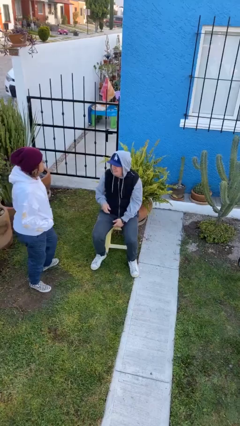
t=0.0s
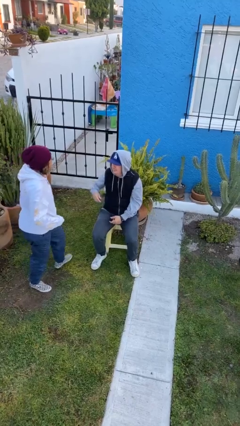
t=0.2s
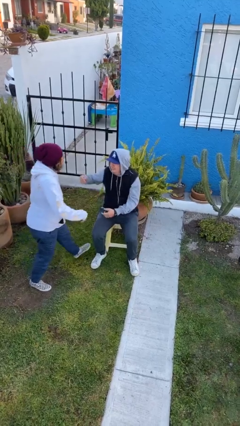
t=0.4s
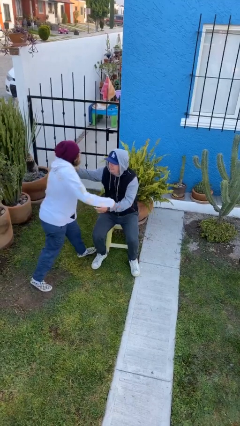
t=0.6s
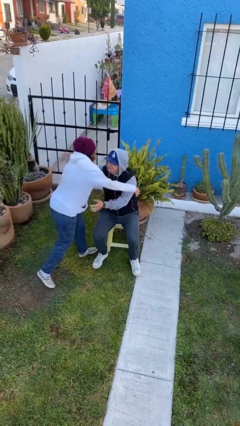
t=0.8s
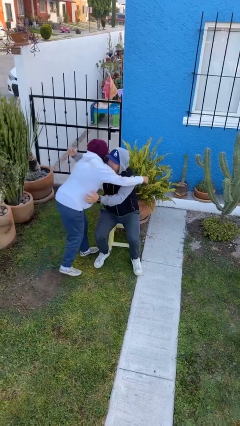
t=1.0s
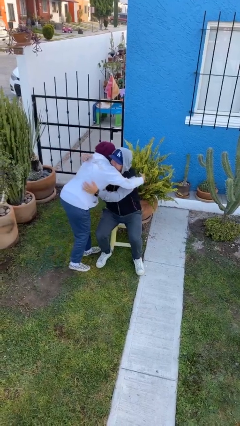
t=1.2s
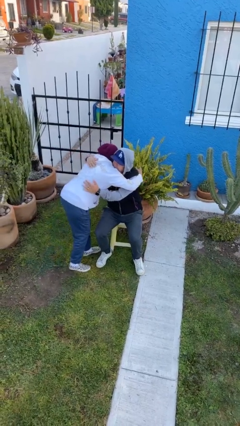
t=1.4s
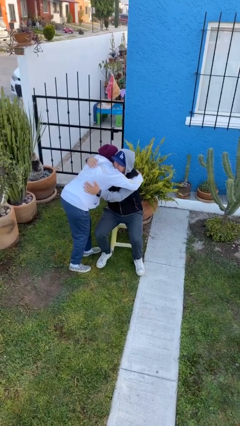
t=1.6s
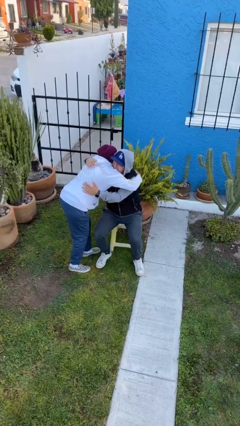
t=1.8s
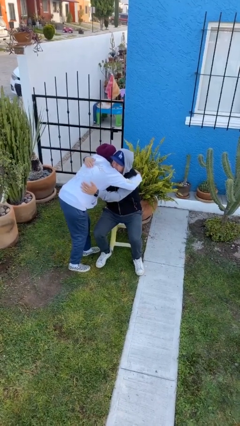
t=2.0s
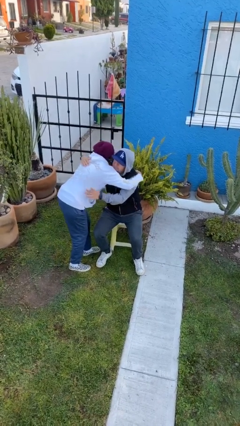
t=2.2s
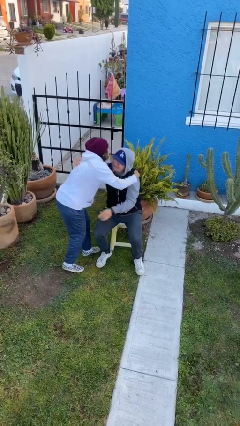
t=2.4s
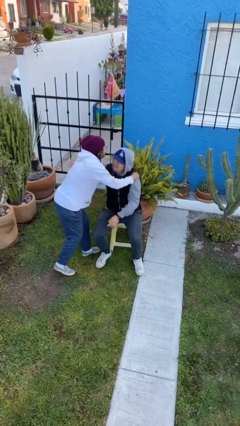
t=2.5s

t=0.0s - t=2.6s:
person embraces person

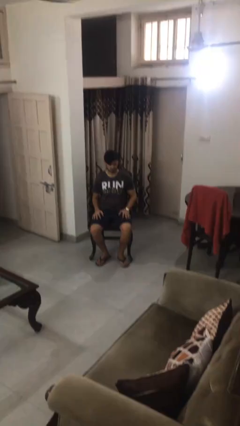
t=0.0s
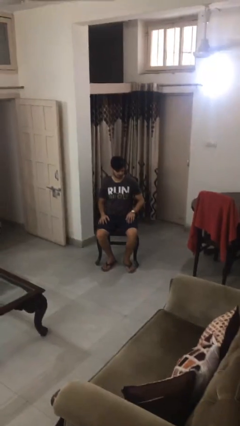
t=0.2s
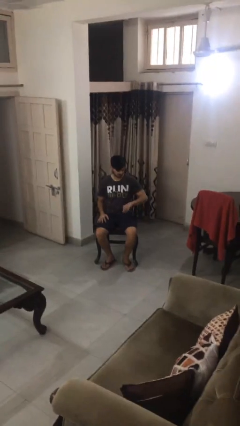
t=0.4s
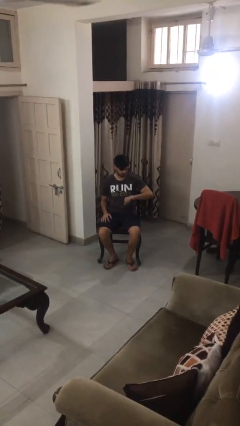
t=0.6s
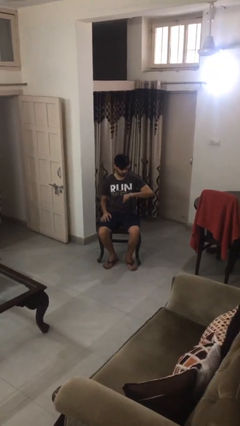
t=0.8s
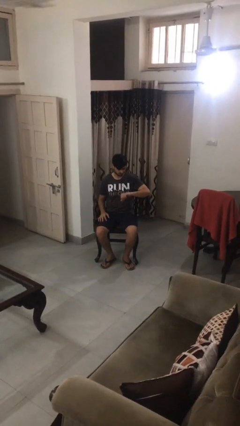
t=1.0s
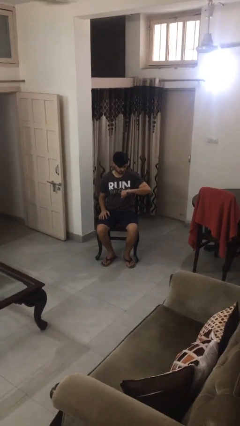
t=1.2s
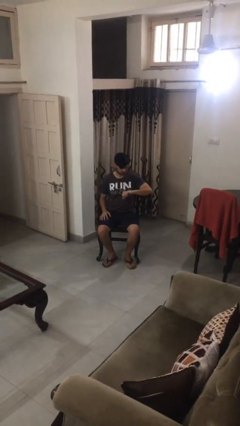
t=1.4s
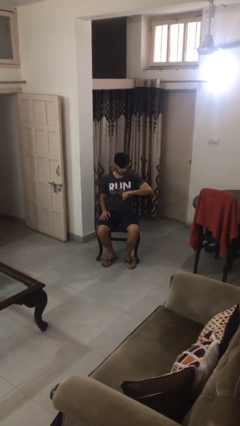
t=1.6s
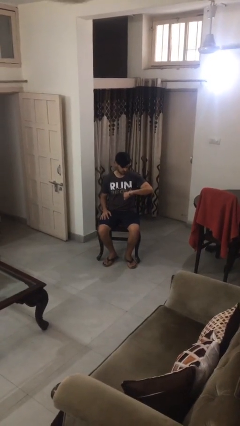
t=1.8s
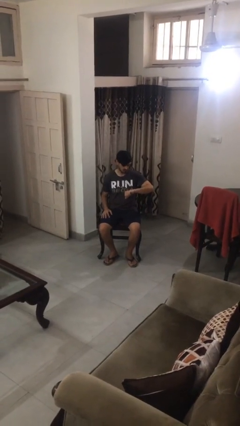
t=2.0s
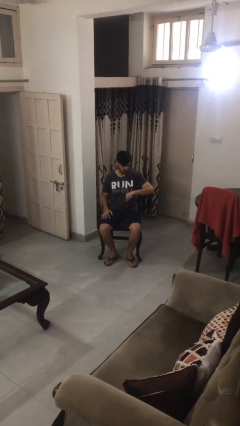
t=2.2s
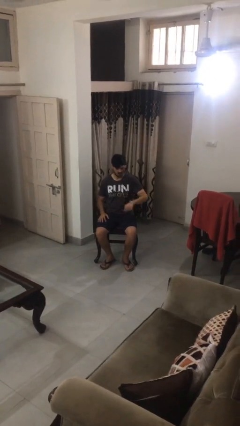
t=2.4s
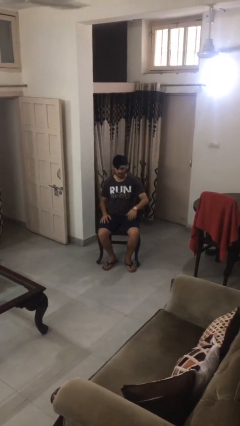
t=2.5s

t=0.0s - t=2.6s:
person looks at wristwatch

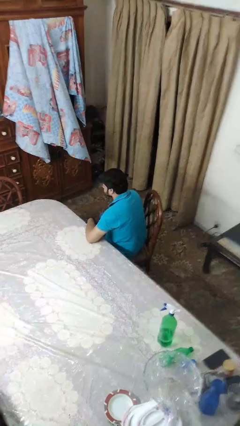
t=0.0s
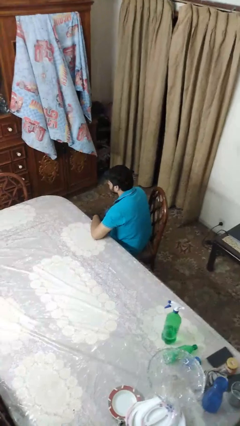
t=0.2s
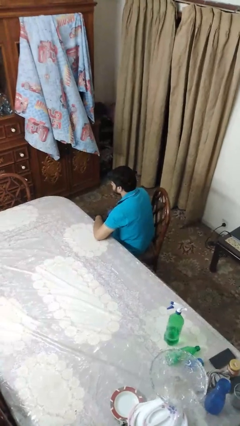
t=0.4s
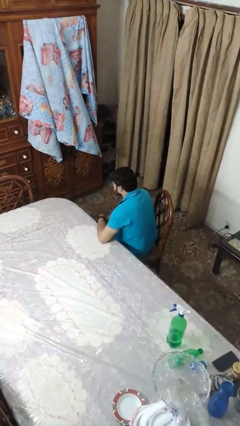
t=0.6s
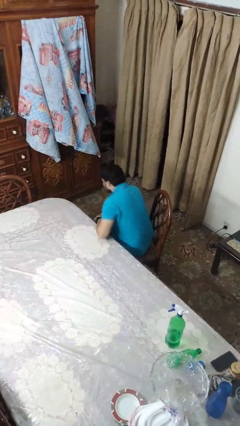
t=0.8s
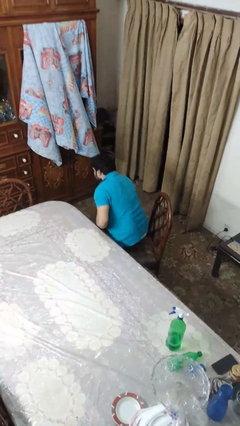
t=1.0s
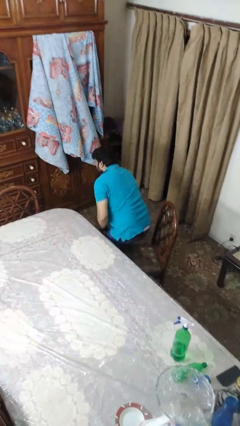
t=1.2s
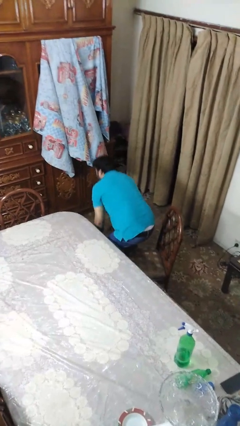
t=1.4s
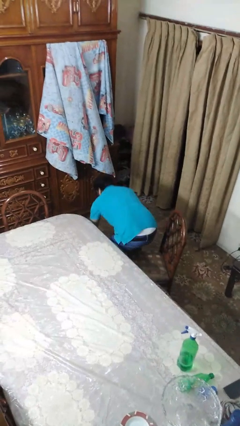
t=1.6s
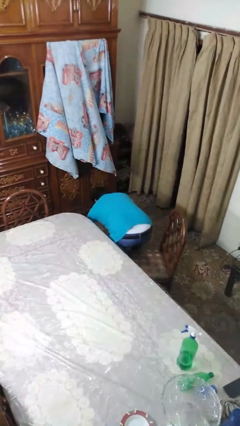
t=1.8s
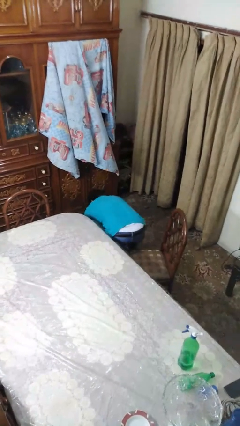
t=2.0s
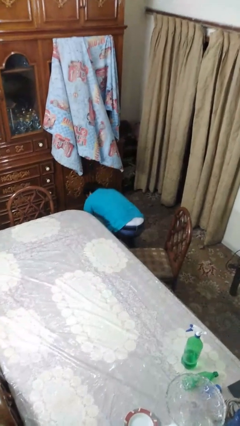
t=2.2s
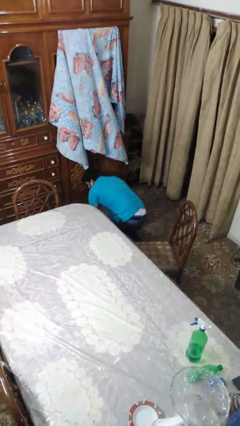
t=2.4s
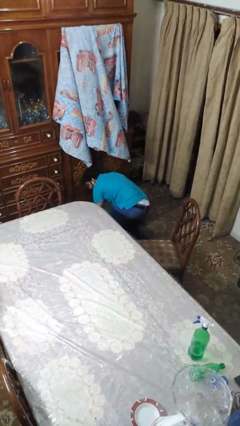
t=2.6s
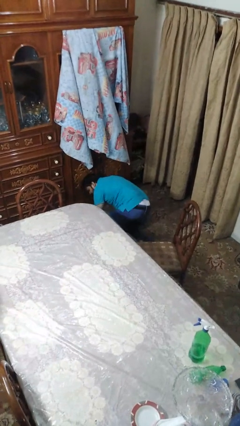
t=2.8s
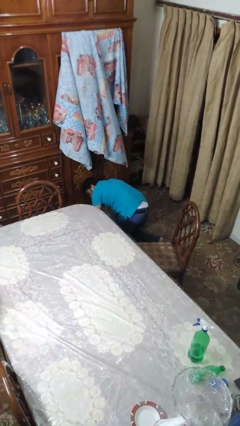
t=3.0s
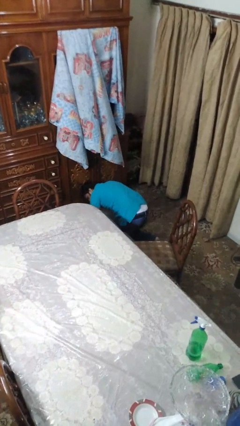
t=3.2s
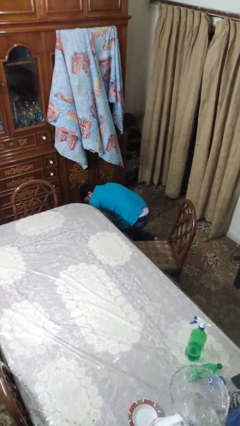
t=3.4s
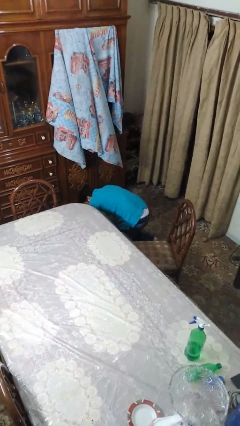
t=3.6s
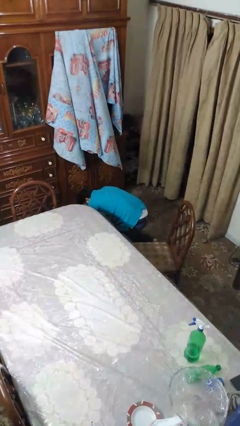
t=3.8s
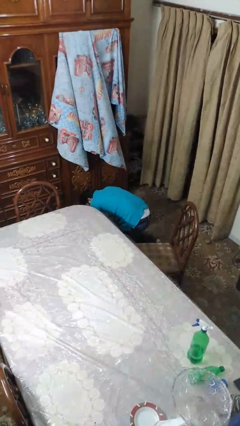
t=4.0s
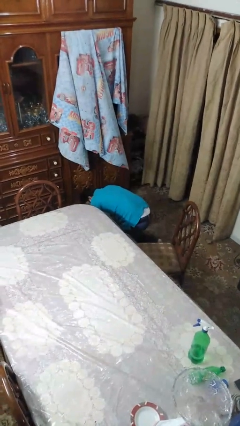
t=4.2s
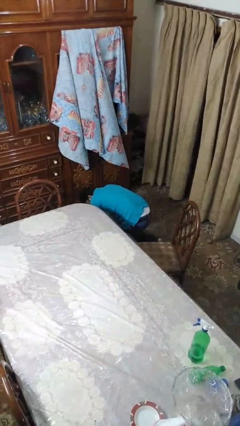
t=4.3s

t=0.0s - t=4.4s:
person falls from chair

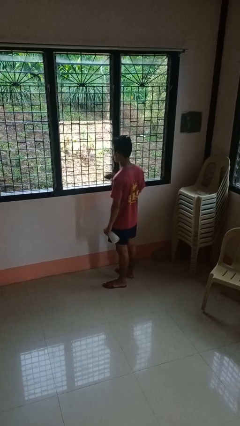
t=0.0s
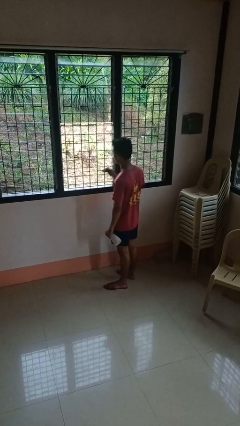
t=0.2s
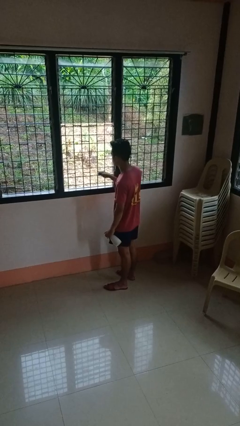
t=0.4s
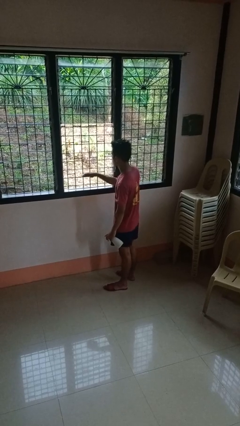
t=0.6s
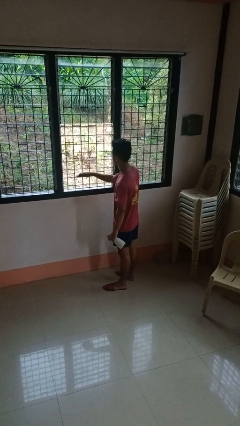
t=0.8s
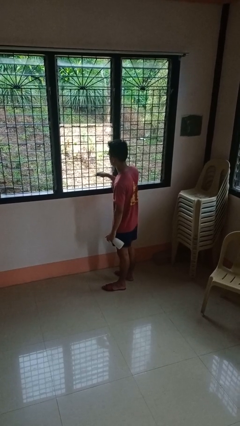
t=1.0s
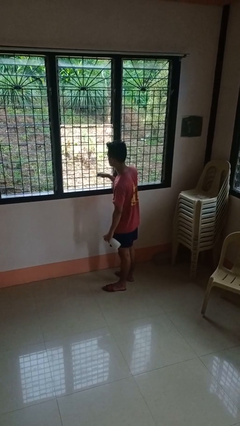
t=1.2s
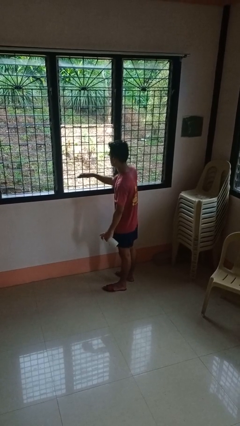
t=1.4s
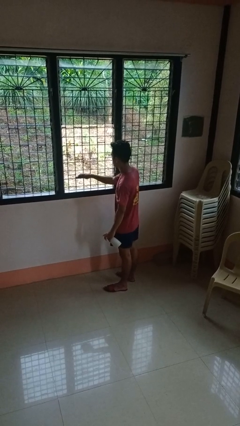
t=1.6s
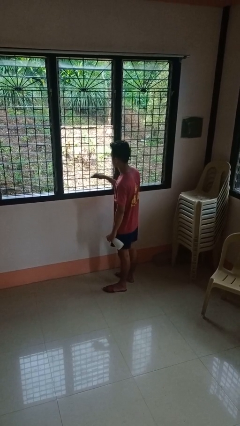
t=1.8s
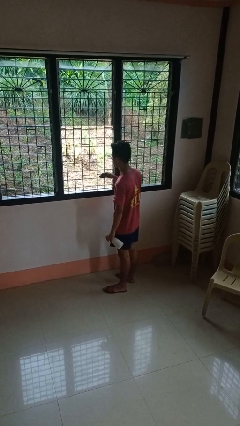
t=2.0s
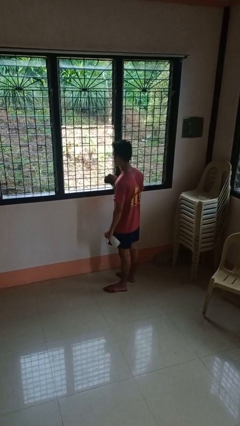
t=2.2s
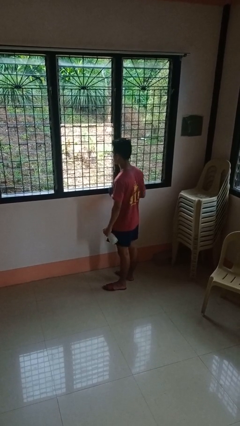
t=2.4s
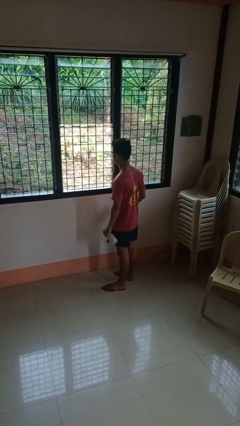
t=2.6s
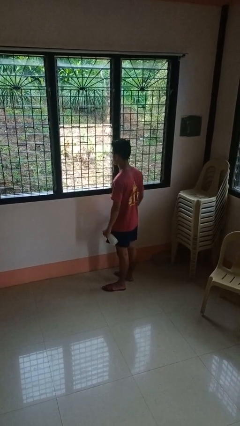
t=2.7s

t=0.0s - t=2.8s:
person washes window

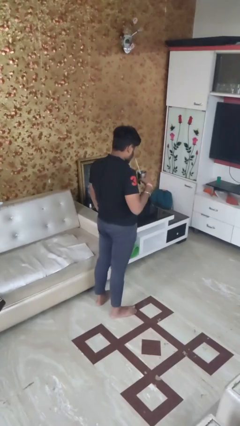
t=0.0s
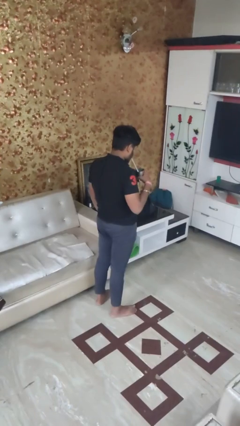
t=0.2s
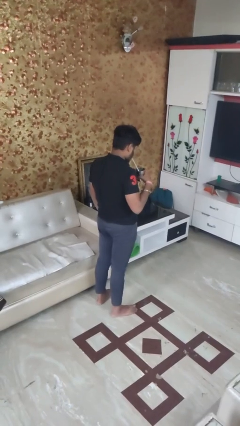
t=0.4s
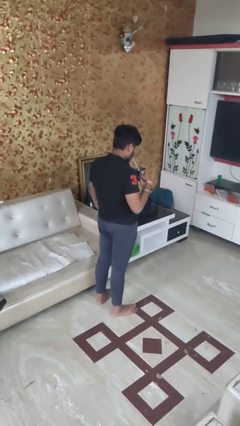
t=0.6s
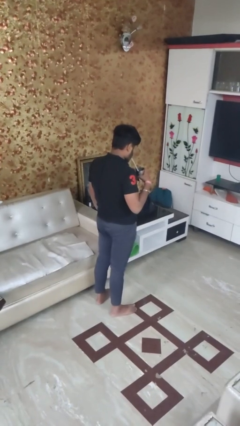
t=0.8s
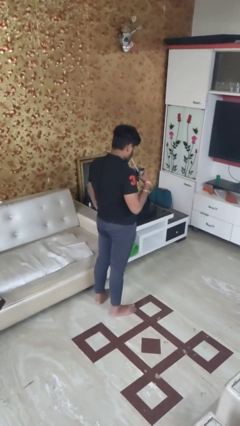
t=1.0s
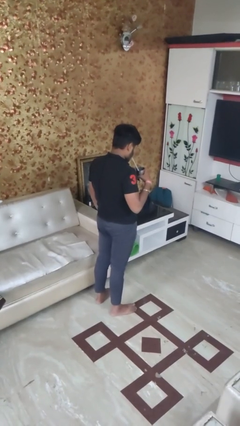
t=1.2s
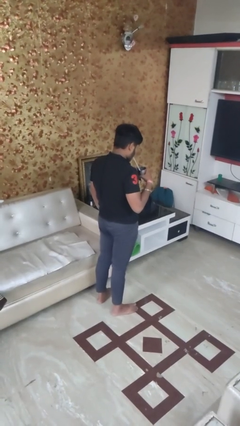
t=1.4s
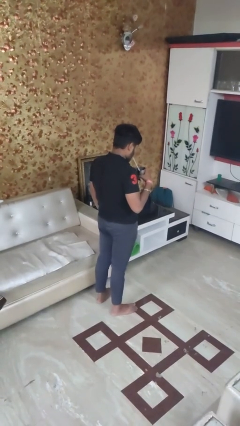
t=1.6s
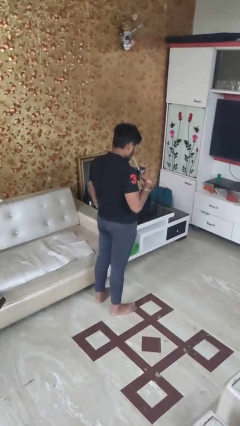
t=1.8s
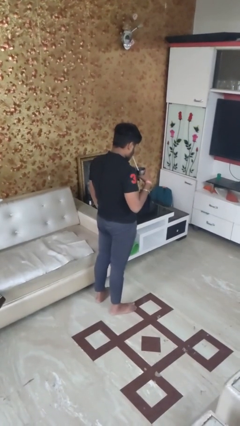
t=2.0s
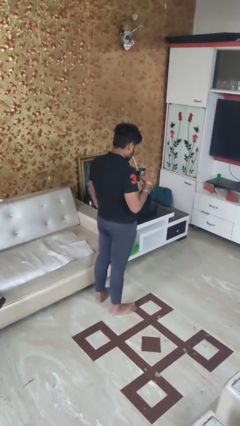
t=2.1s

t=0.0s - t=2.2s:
person drinks from straw

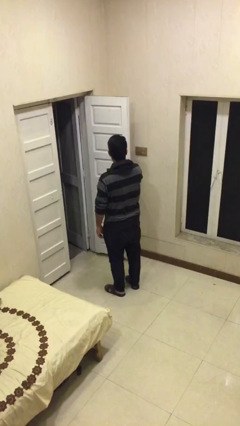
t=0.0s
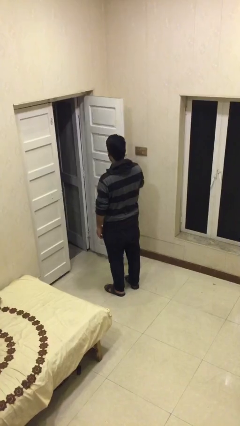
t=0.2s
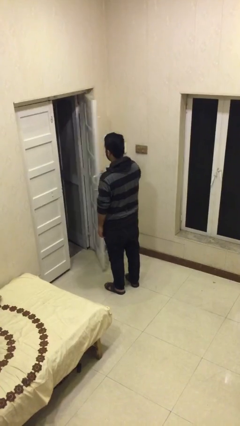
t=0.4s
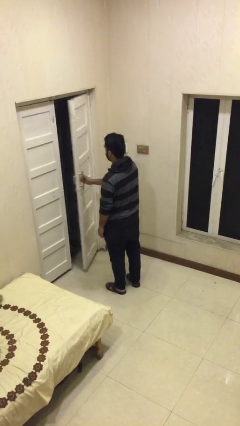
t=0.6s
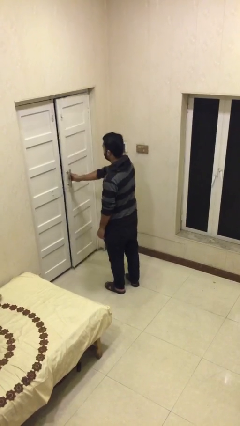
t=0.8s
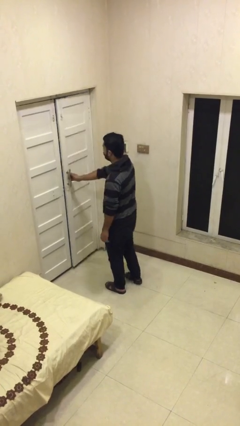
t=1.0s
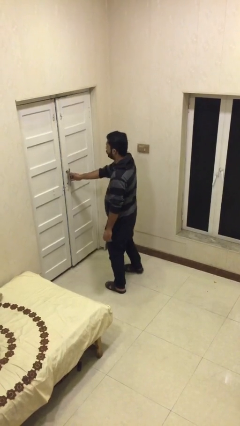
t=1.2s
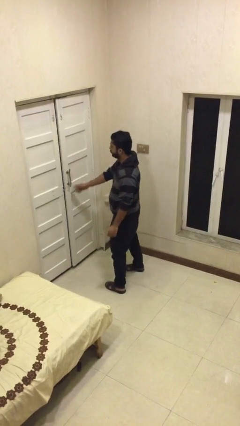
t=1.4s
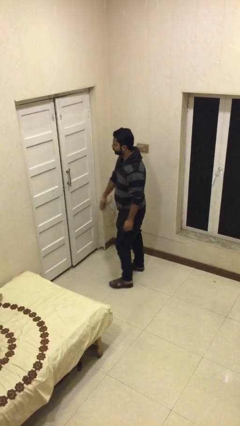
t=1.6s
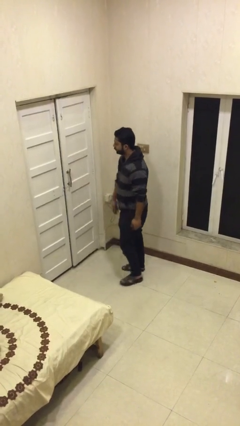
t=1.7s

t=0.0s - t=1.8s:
person closes facility door

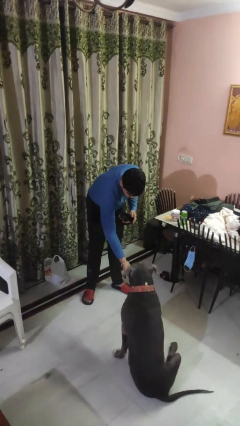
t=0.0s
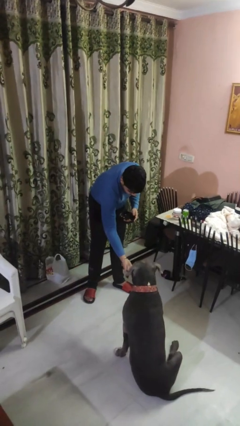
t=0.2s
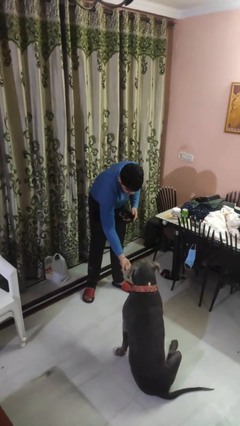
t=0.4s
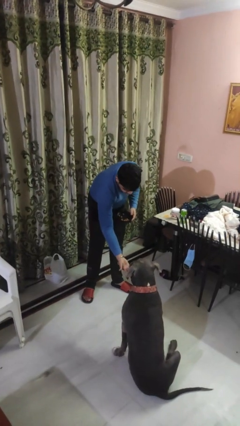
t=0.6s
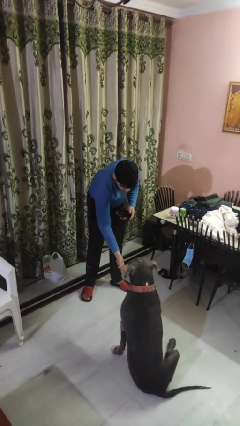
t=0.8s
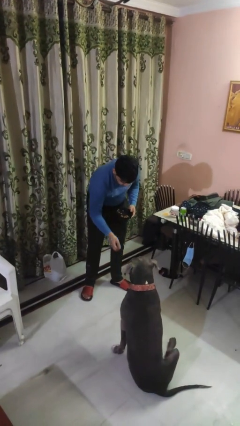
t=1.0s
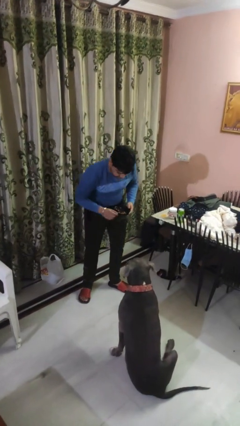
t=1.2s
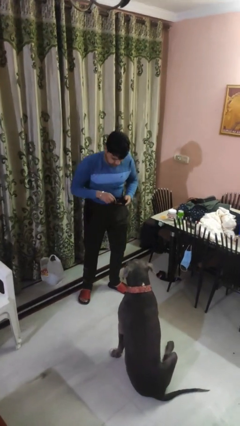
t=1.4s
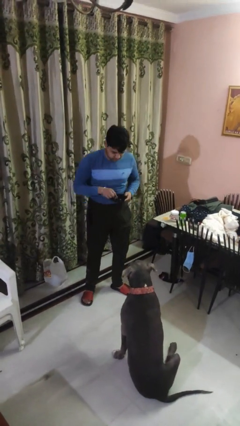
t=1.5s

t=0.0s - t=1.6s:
person feeds dog
